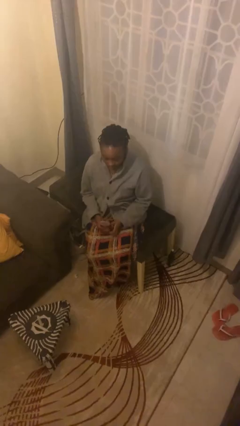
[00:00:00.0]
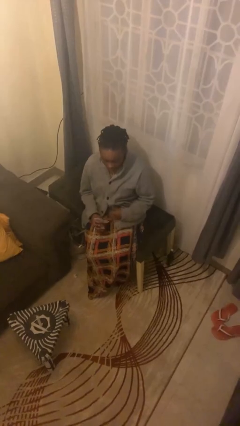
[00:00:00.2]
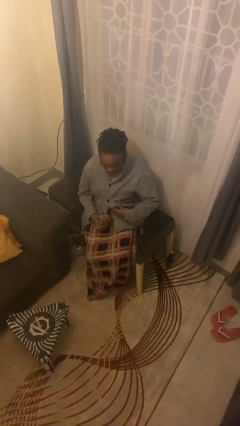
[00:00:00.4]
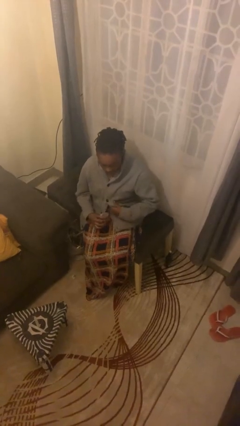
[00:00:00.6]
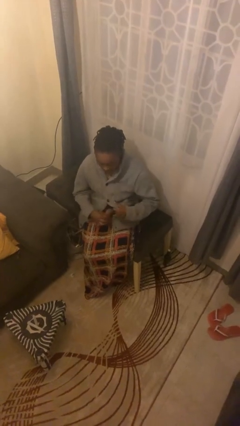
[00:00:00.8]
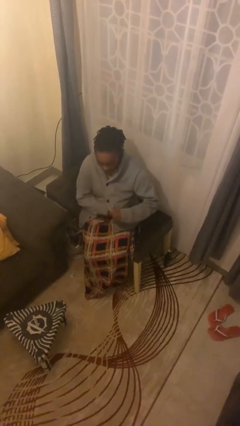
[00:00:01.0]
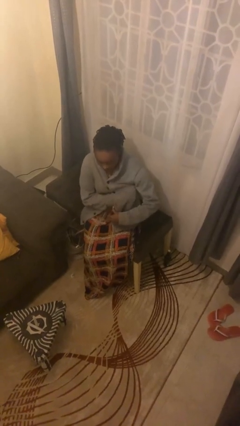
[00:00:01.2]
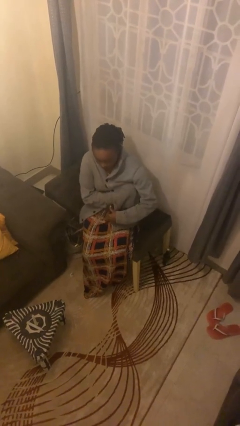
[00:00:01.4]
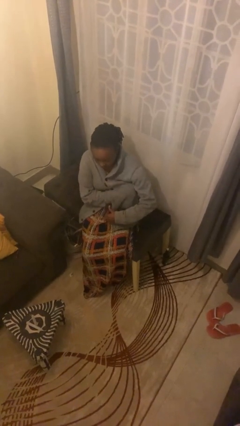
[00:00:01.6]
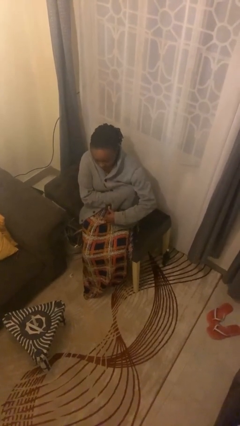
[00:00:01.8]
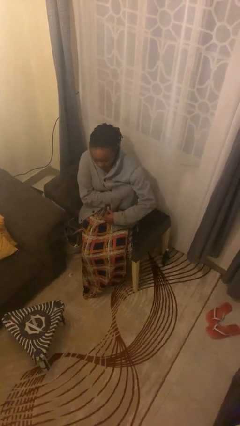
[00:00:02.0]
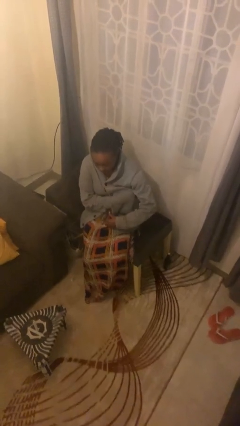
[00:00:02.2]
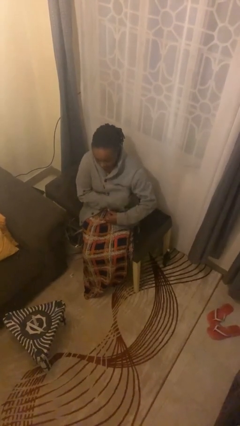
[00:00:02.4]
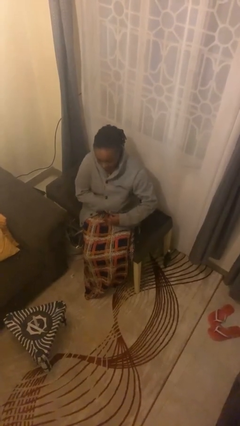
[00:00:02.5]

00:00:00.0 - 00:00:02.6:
person applies deodorant

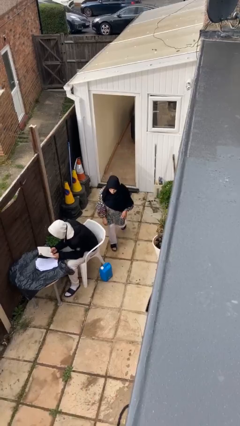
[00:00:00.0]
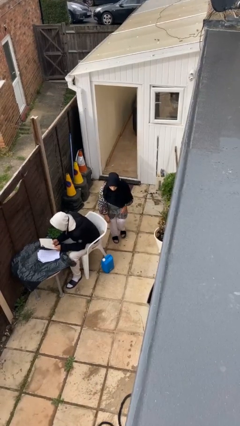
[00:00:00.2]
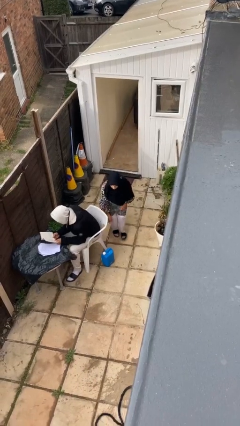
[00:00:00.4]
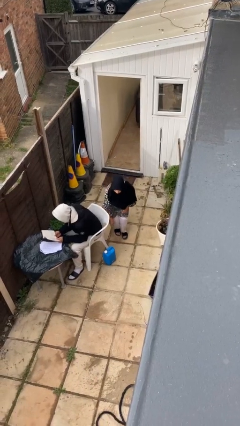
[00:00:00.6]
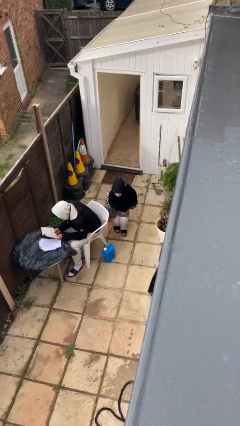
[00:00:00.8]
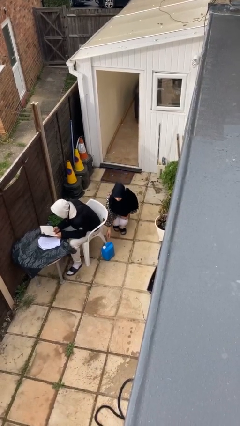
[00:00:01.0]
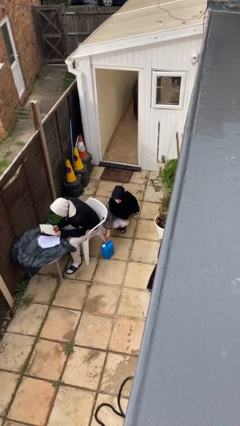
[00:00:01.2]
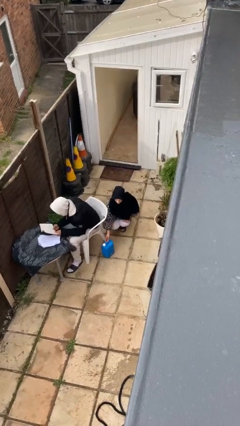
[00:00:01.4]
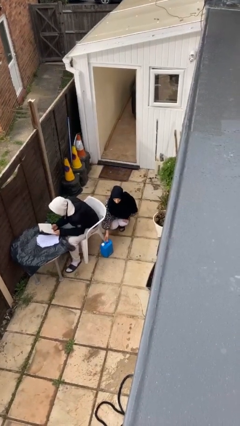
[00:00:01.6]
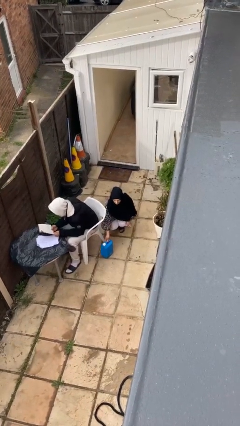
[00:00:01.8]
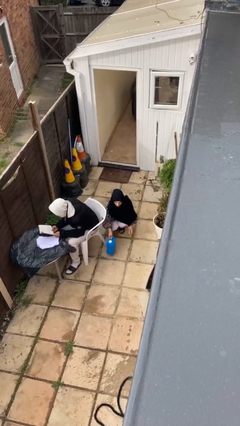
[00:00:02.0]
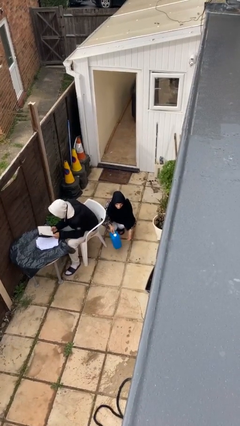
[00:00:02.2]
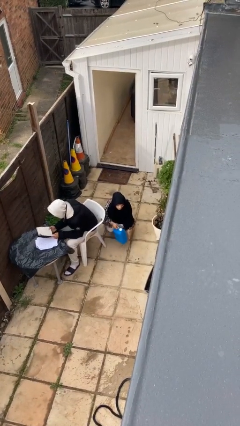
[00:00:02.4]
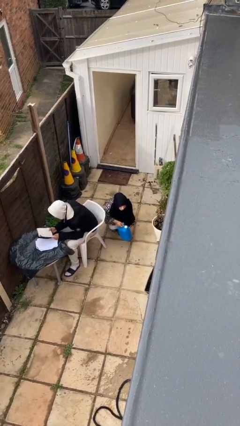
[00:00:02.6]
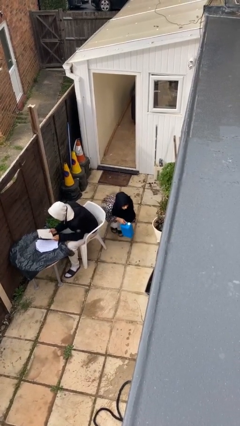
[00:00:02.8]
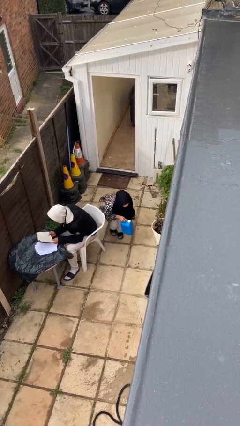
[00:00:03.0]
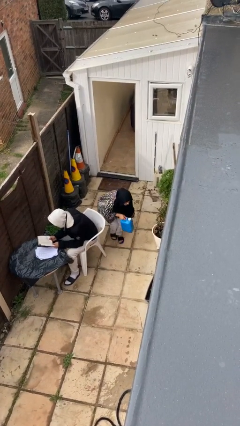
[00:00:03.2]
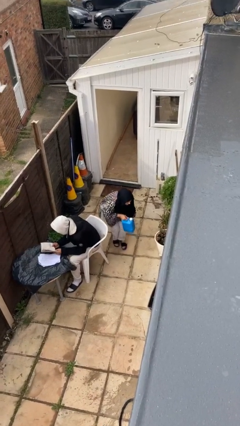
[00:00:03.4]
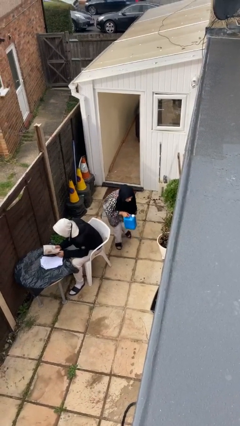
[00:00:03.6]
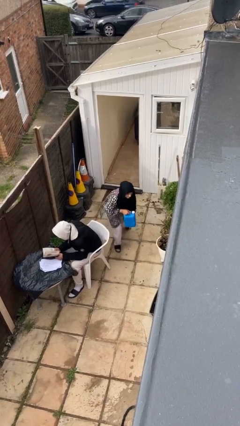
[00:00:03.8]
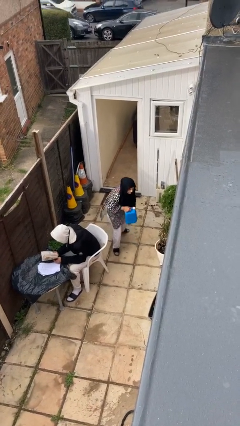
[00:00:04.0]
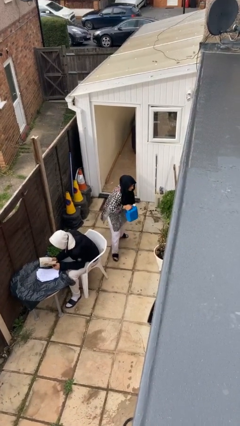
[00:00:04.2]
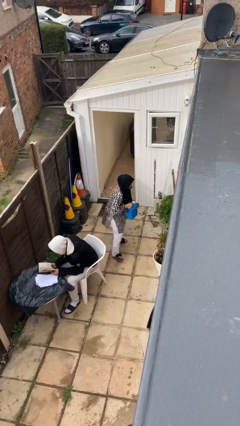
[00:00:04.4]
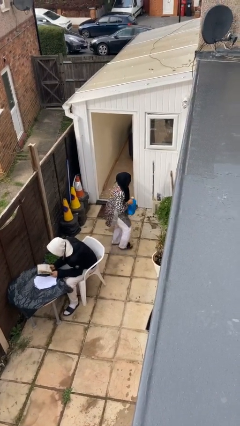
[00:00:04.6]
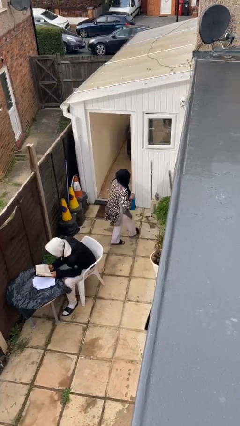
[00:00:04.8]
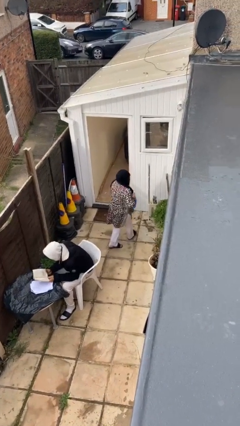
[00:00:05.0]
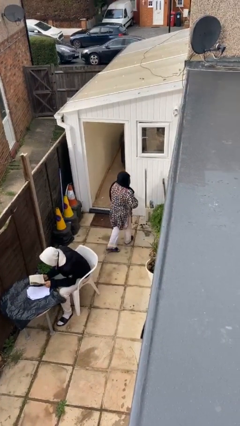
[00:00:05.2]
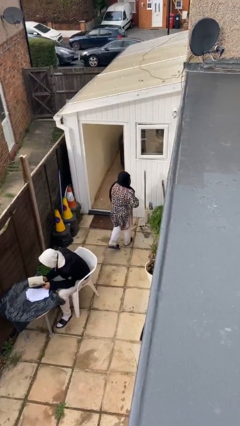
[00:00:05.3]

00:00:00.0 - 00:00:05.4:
person steals object from person

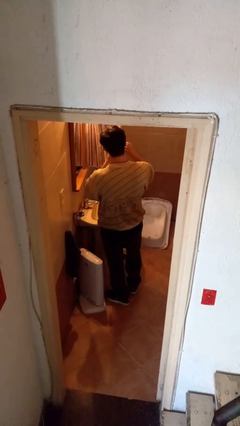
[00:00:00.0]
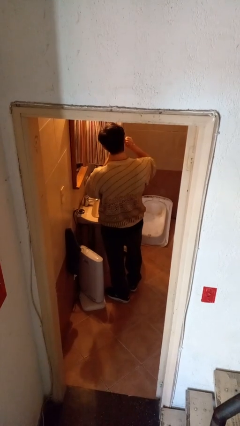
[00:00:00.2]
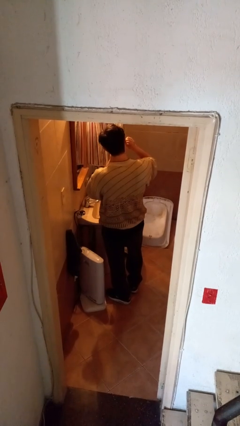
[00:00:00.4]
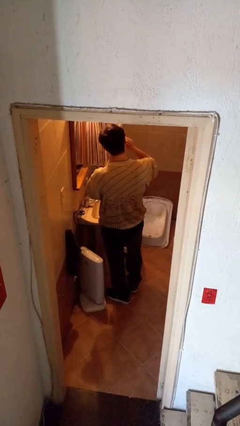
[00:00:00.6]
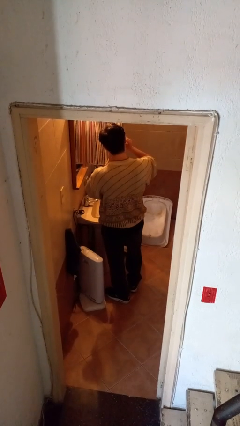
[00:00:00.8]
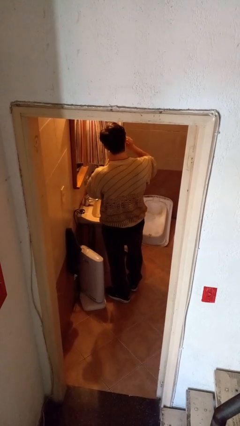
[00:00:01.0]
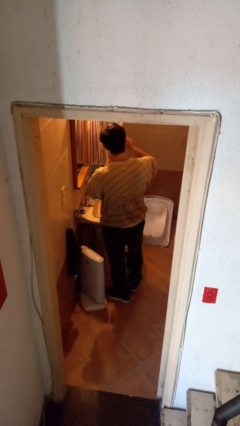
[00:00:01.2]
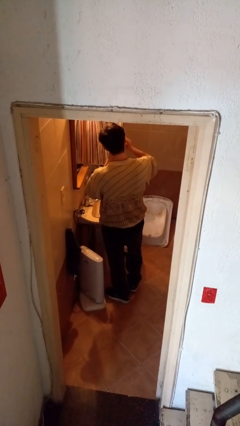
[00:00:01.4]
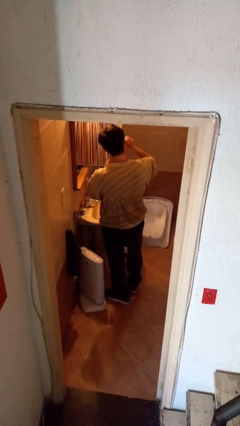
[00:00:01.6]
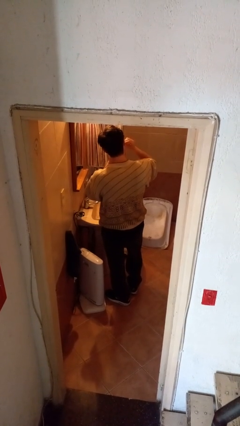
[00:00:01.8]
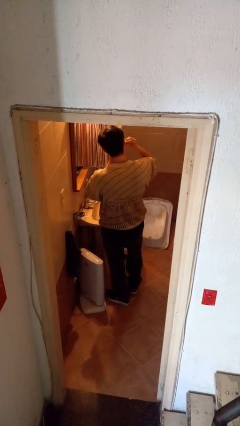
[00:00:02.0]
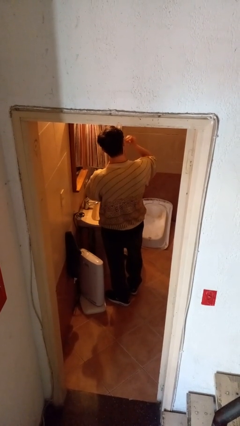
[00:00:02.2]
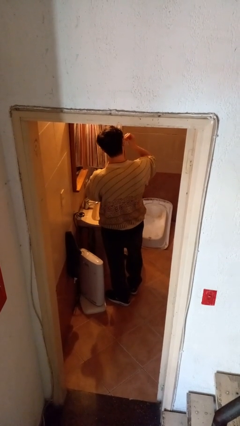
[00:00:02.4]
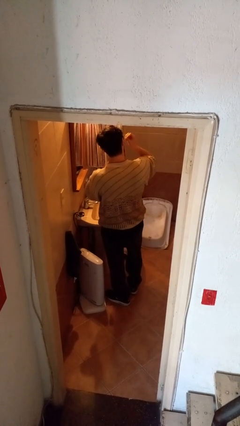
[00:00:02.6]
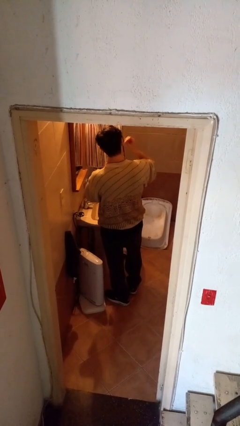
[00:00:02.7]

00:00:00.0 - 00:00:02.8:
person flosses

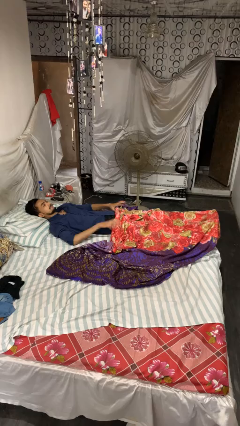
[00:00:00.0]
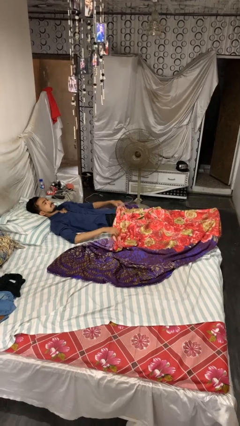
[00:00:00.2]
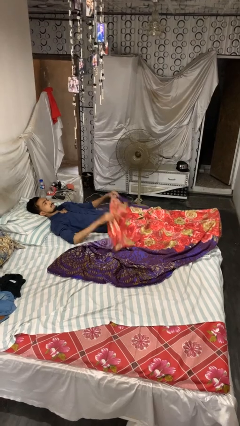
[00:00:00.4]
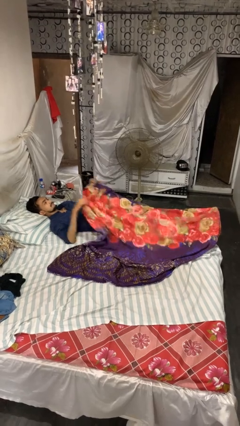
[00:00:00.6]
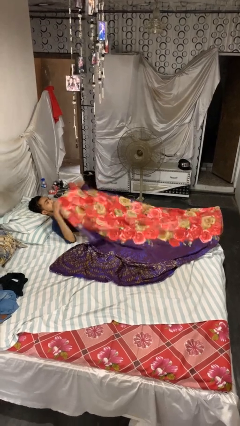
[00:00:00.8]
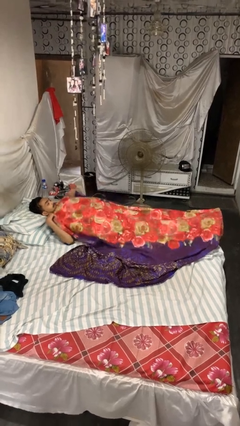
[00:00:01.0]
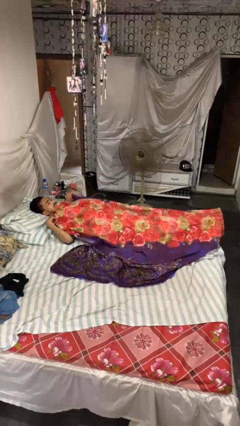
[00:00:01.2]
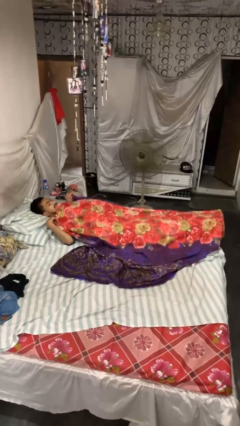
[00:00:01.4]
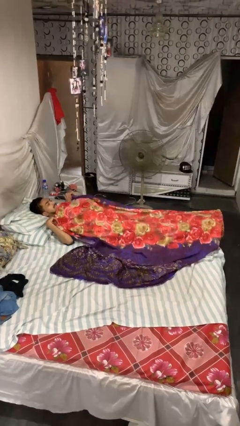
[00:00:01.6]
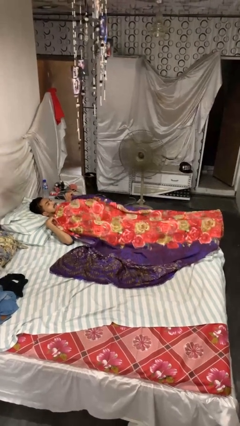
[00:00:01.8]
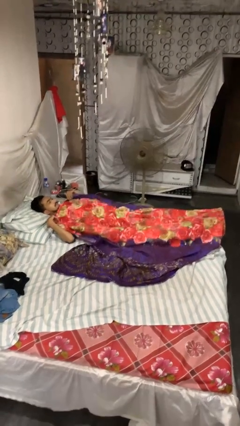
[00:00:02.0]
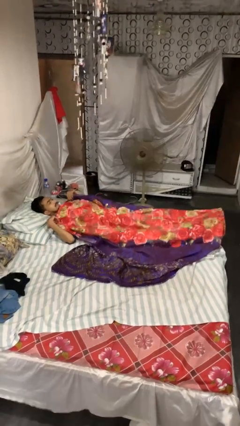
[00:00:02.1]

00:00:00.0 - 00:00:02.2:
person covers with bedsheets

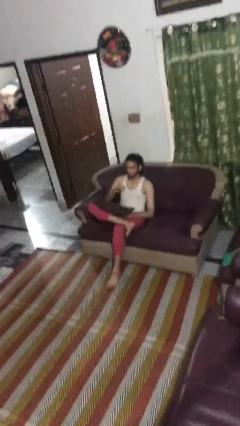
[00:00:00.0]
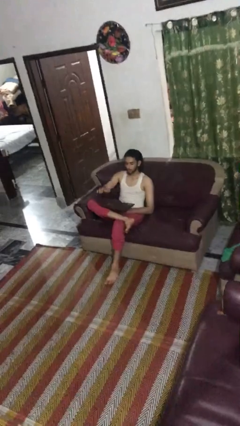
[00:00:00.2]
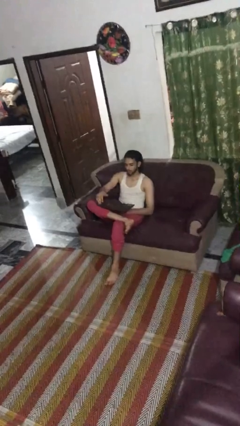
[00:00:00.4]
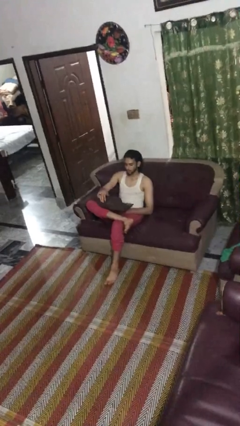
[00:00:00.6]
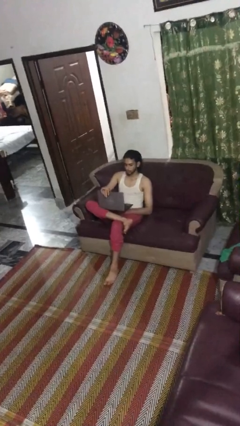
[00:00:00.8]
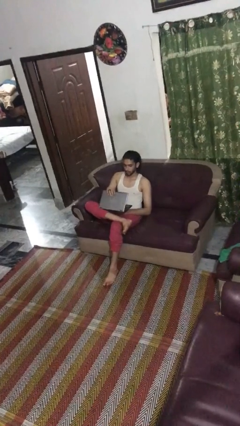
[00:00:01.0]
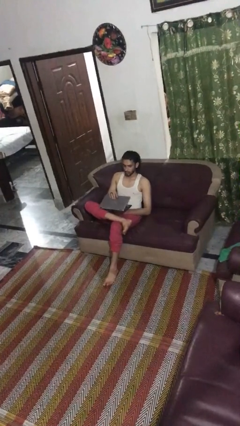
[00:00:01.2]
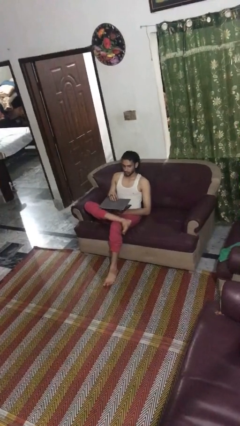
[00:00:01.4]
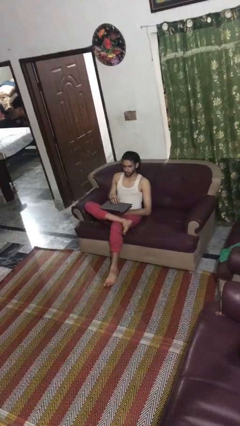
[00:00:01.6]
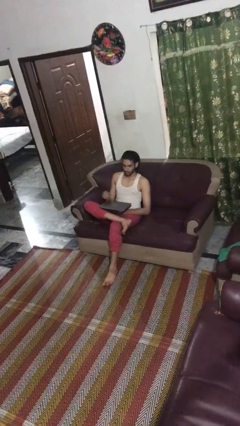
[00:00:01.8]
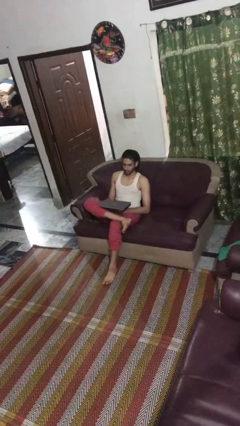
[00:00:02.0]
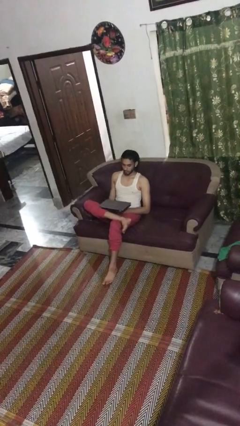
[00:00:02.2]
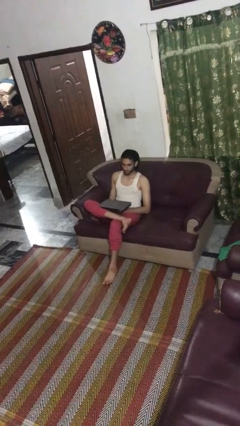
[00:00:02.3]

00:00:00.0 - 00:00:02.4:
person closes laptop

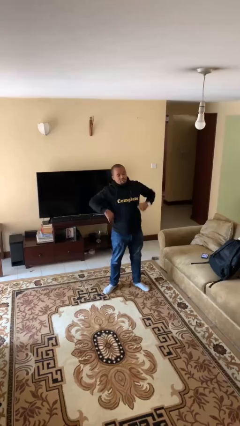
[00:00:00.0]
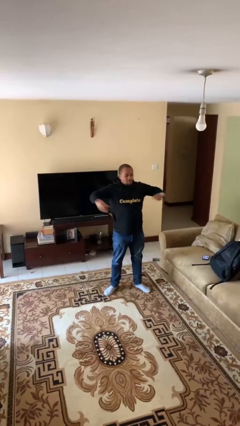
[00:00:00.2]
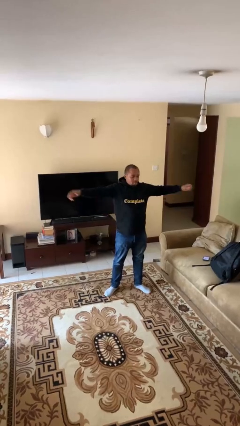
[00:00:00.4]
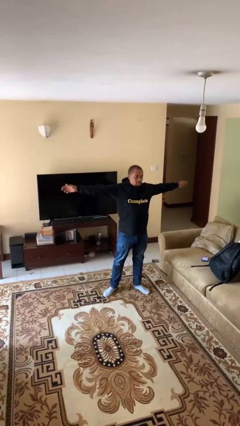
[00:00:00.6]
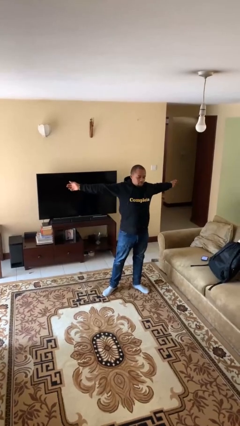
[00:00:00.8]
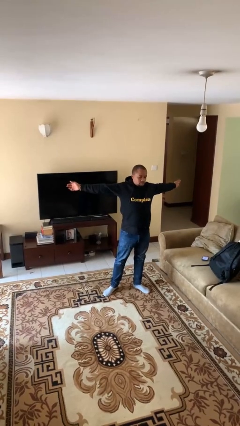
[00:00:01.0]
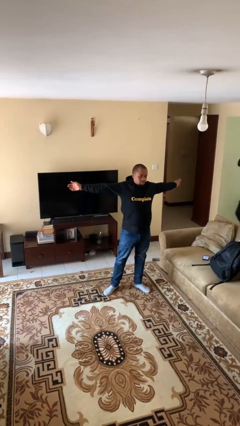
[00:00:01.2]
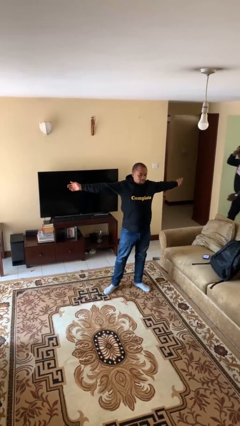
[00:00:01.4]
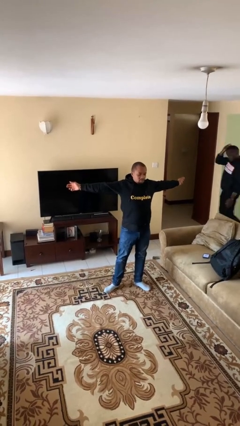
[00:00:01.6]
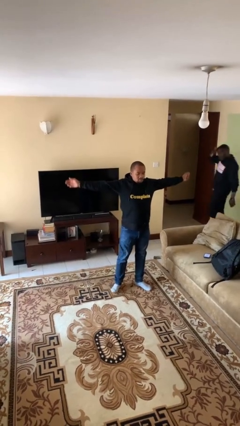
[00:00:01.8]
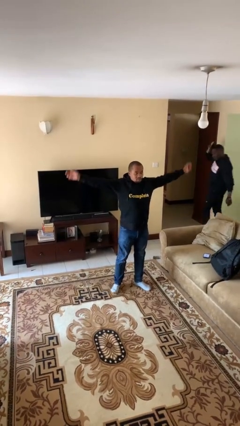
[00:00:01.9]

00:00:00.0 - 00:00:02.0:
person stretches arms to side
